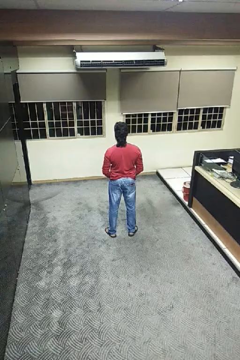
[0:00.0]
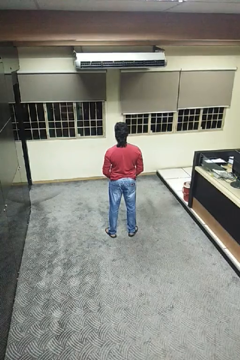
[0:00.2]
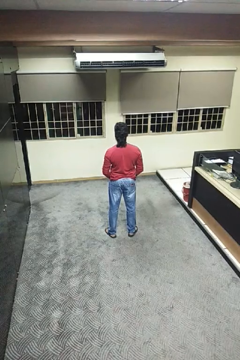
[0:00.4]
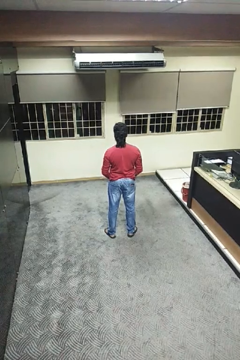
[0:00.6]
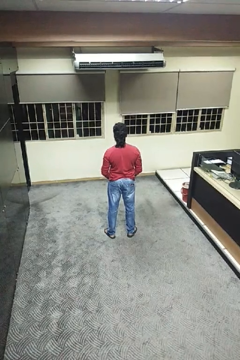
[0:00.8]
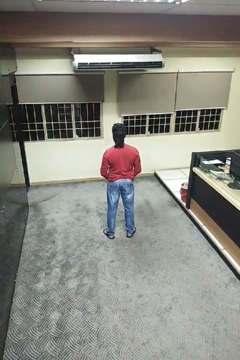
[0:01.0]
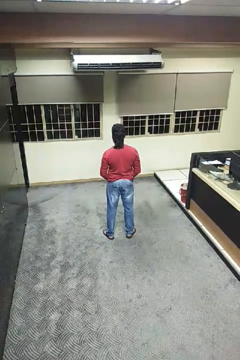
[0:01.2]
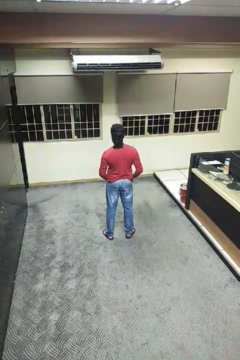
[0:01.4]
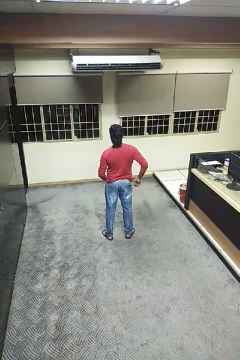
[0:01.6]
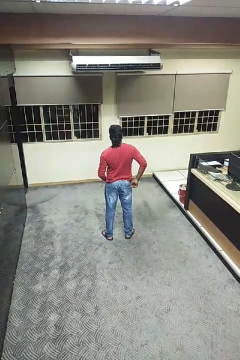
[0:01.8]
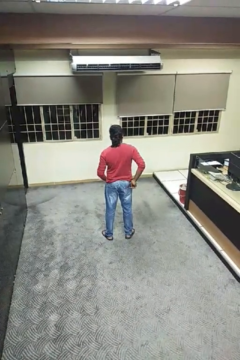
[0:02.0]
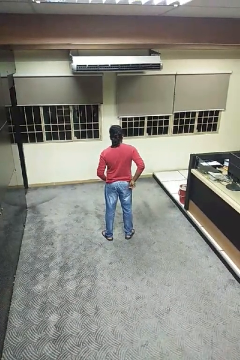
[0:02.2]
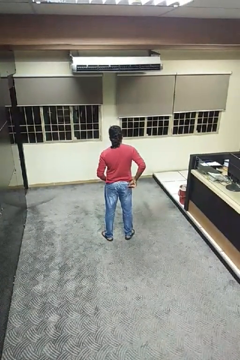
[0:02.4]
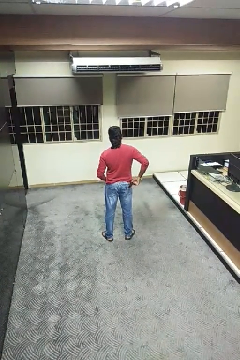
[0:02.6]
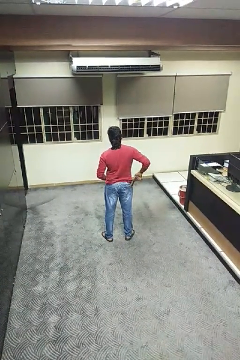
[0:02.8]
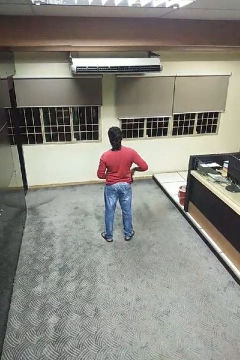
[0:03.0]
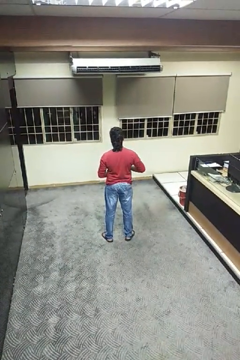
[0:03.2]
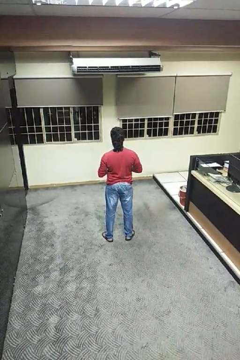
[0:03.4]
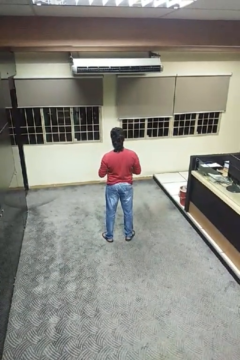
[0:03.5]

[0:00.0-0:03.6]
person takes phone from pocket

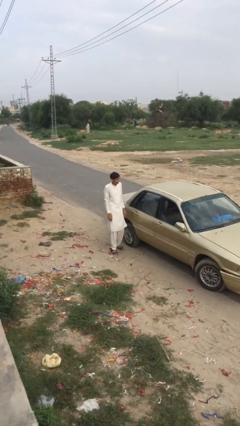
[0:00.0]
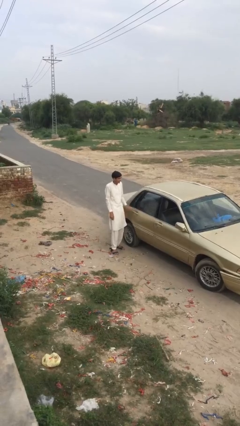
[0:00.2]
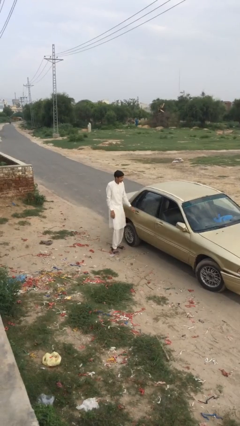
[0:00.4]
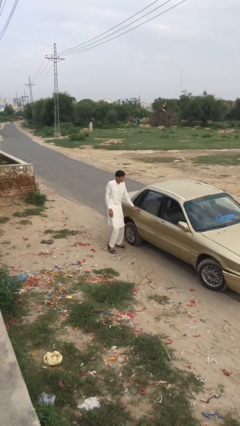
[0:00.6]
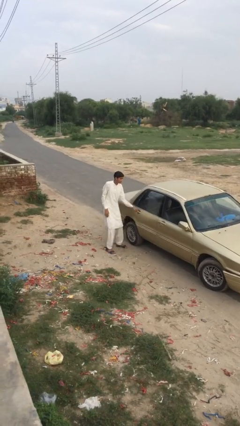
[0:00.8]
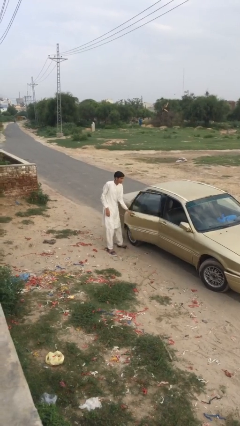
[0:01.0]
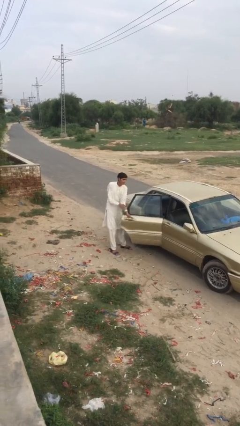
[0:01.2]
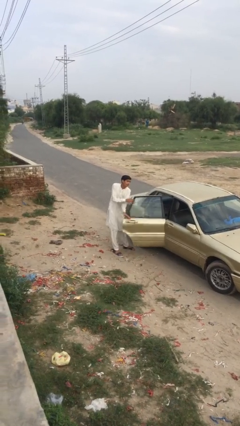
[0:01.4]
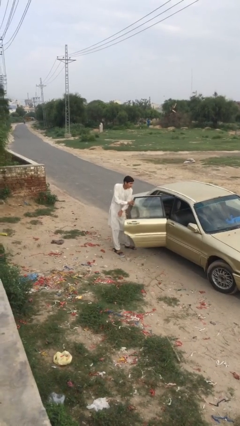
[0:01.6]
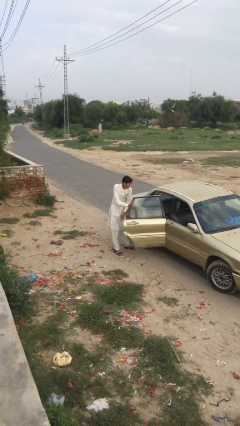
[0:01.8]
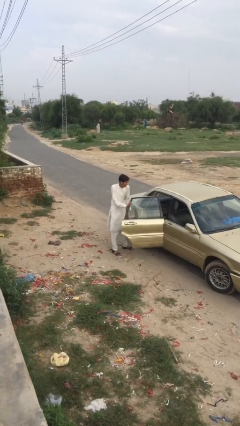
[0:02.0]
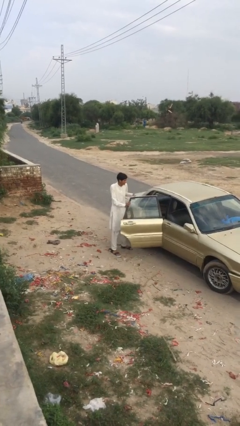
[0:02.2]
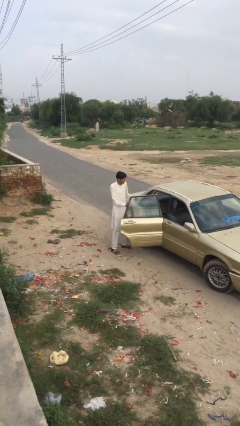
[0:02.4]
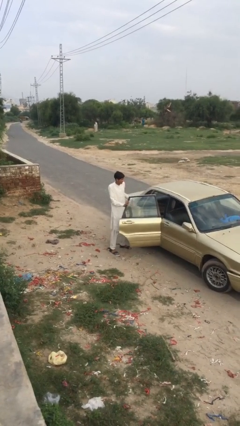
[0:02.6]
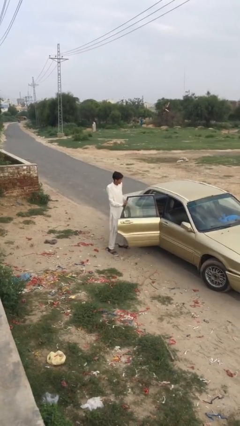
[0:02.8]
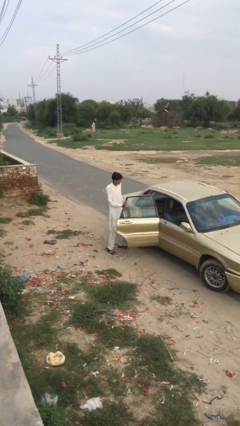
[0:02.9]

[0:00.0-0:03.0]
person opens car door

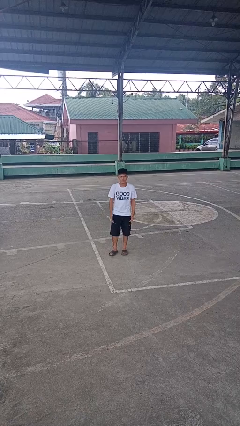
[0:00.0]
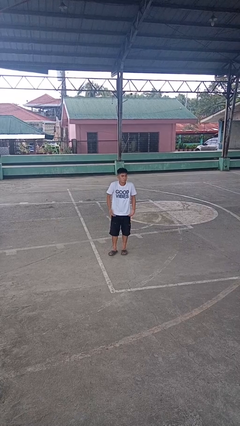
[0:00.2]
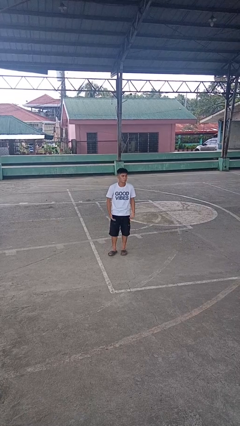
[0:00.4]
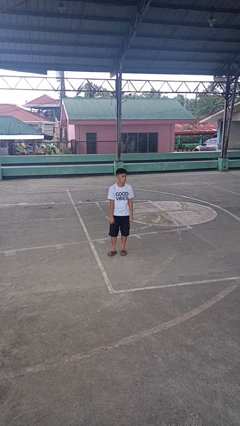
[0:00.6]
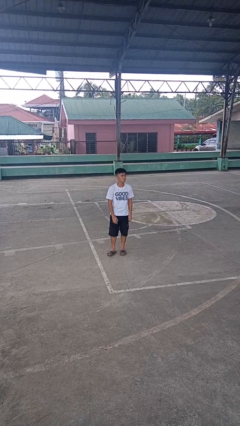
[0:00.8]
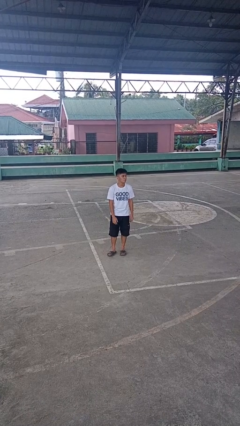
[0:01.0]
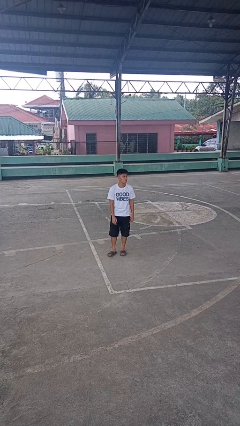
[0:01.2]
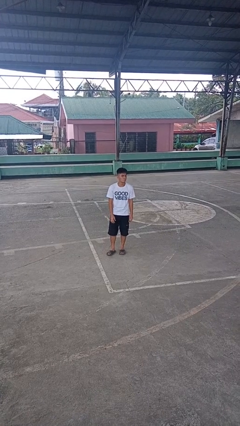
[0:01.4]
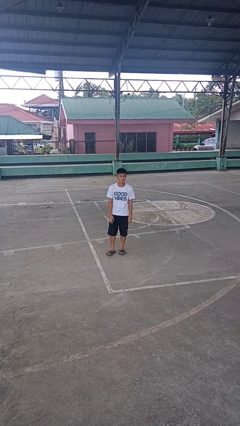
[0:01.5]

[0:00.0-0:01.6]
person shrugs

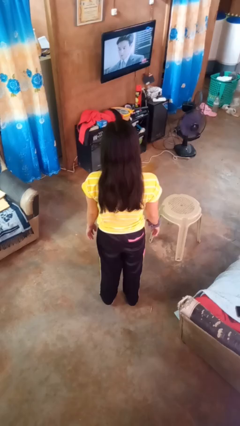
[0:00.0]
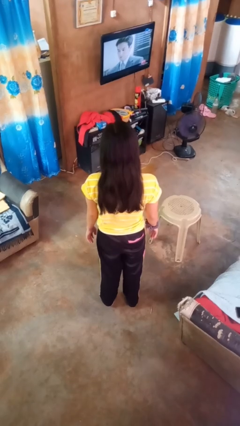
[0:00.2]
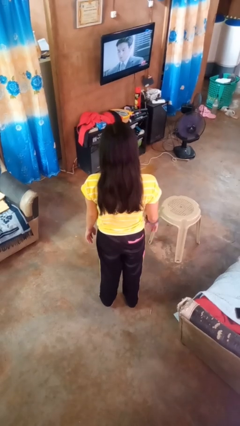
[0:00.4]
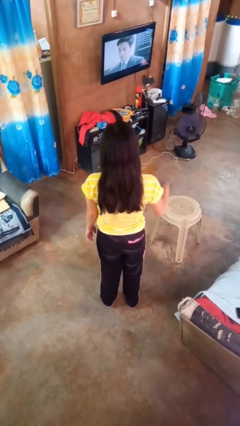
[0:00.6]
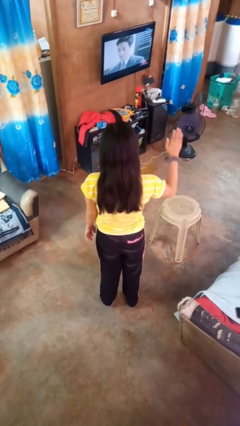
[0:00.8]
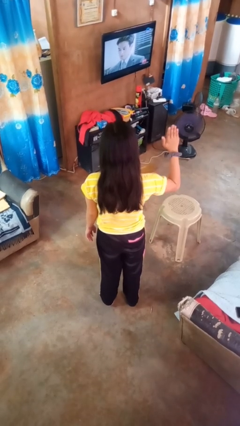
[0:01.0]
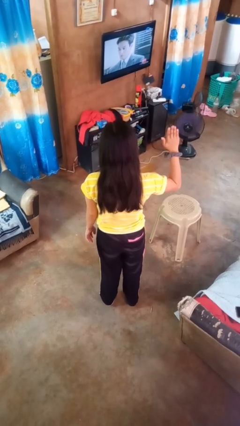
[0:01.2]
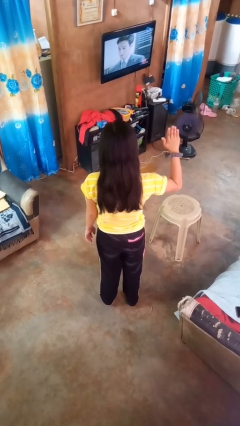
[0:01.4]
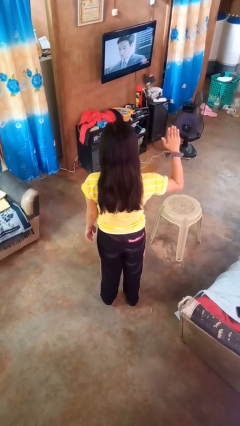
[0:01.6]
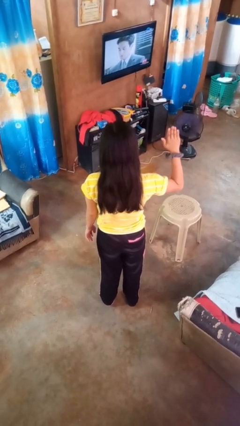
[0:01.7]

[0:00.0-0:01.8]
person gestures number five

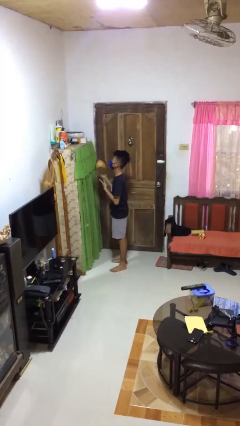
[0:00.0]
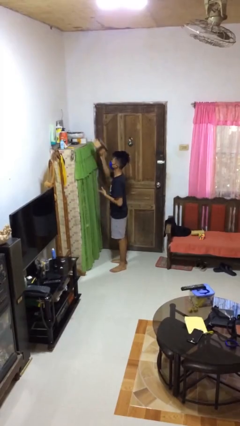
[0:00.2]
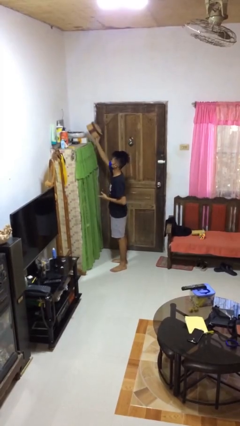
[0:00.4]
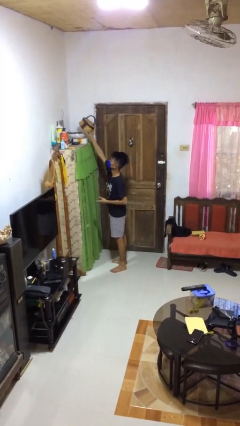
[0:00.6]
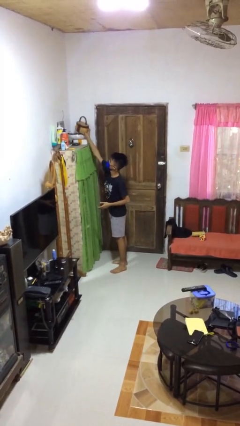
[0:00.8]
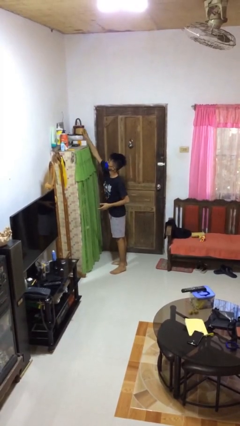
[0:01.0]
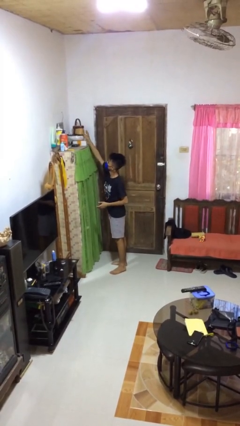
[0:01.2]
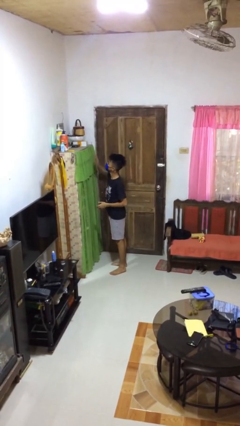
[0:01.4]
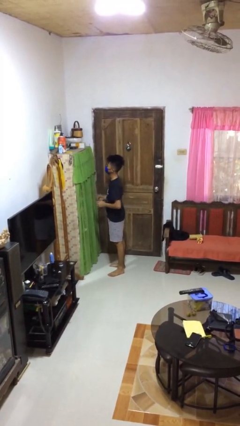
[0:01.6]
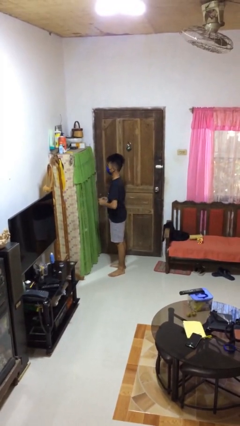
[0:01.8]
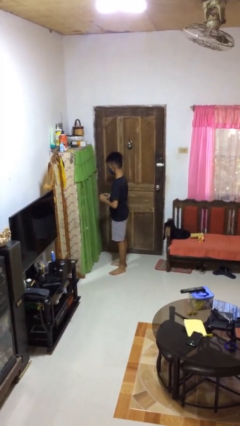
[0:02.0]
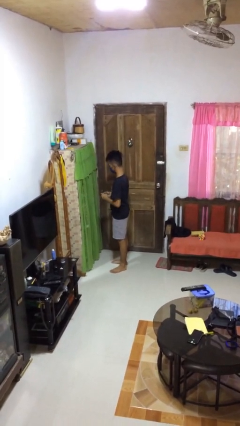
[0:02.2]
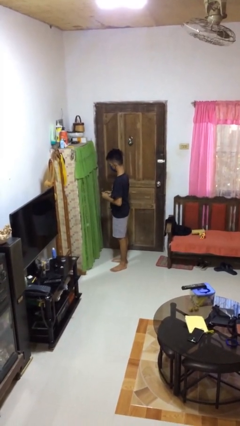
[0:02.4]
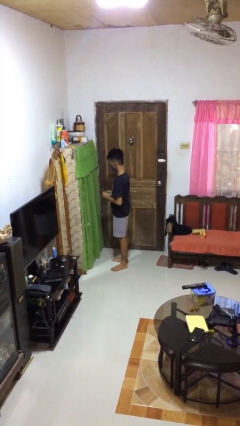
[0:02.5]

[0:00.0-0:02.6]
person puts down object on shelf

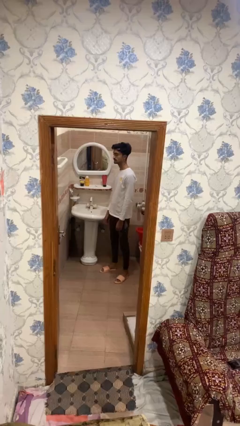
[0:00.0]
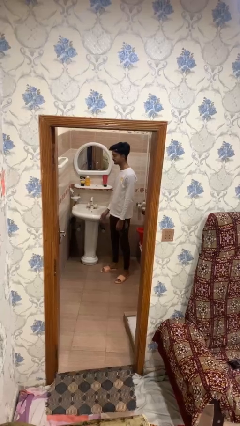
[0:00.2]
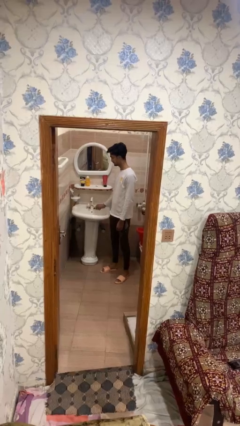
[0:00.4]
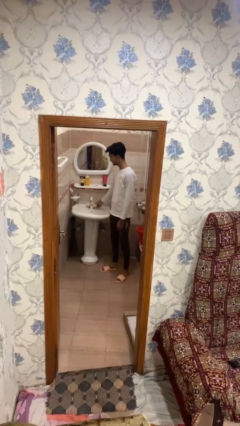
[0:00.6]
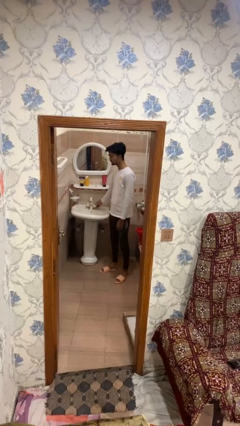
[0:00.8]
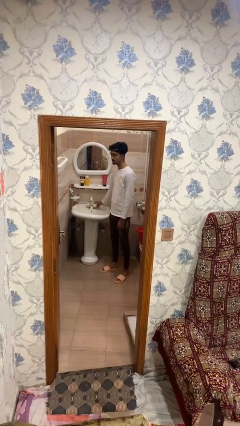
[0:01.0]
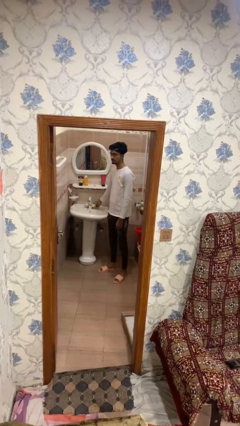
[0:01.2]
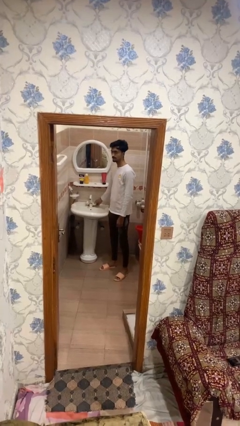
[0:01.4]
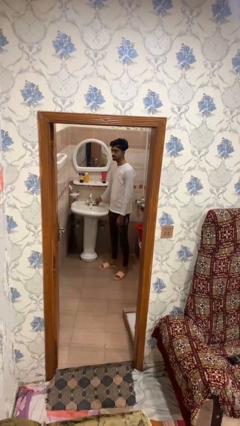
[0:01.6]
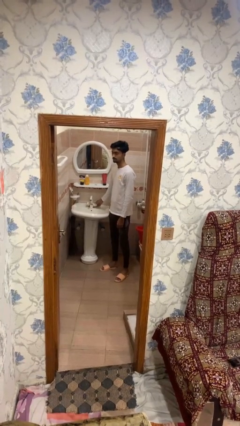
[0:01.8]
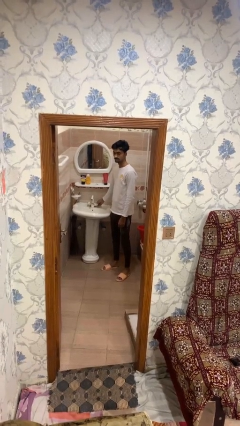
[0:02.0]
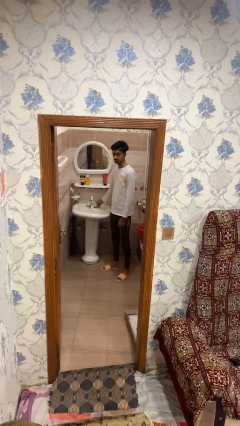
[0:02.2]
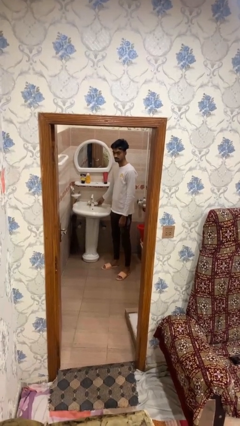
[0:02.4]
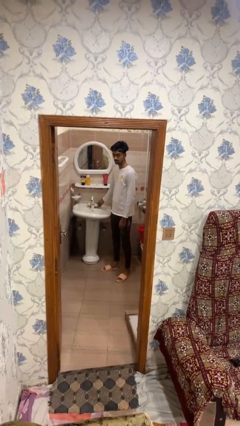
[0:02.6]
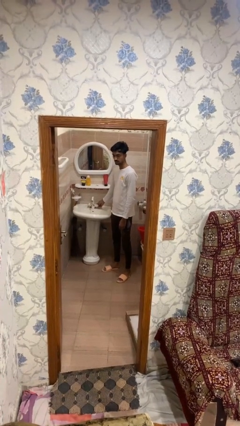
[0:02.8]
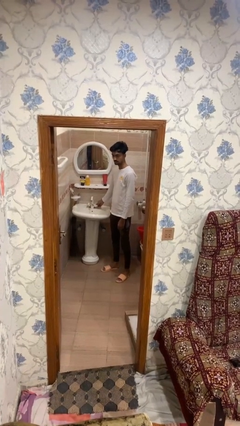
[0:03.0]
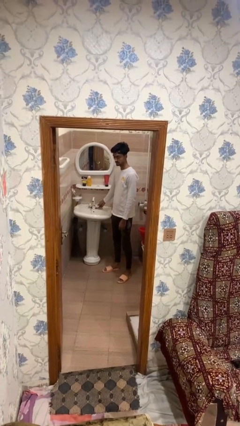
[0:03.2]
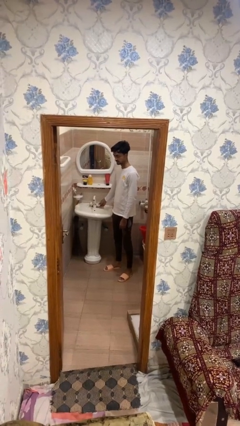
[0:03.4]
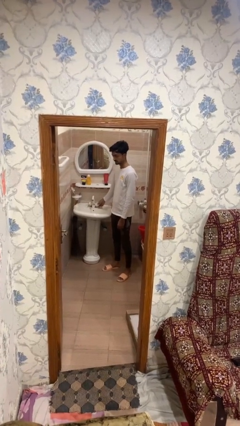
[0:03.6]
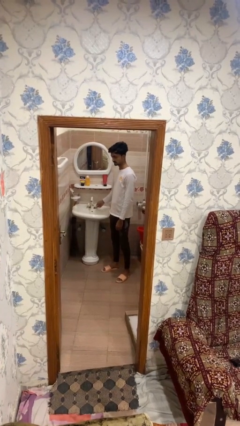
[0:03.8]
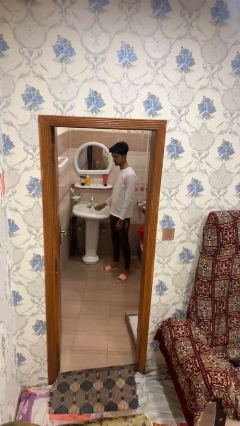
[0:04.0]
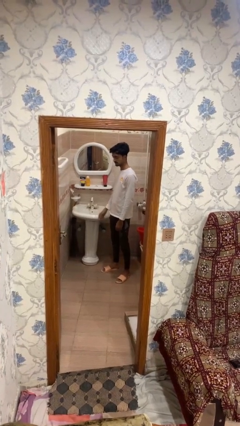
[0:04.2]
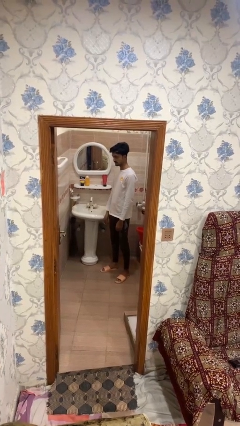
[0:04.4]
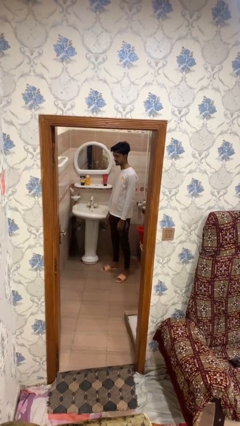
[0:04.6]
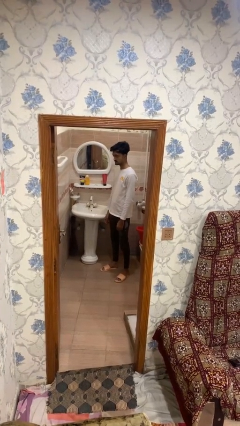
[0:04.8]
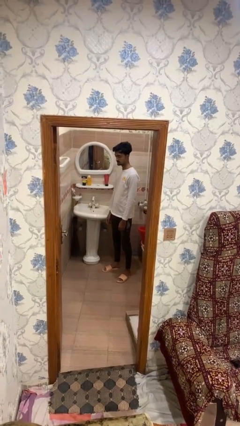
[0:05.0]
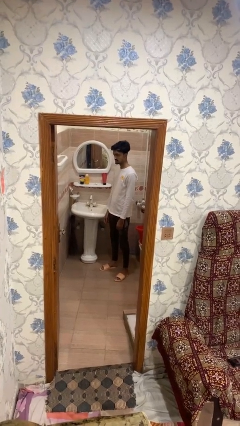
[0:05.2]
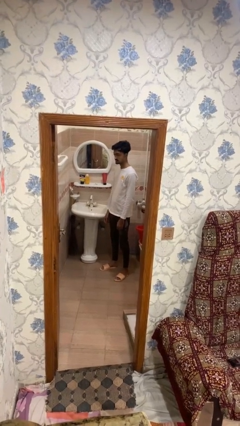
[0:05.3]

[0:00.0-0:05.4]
person turns on faucet
